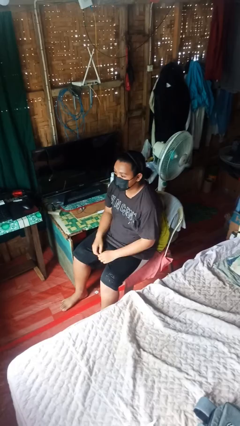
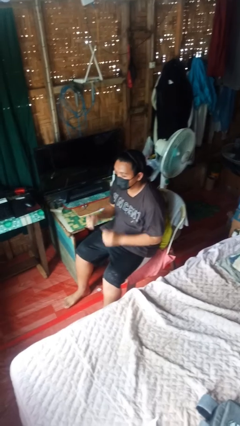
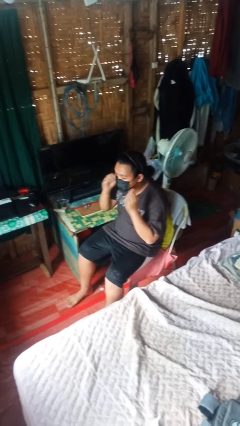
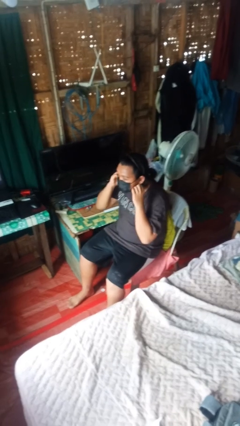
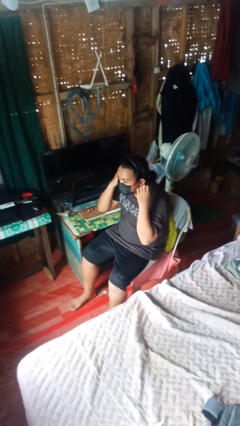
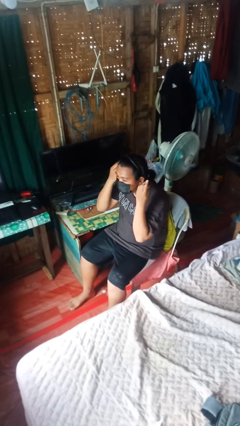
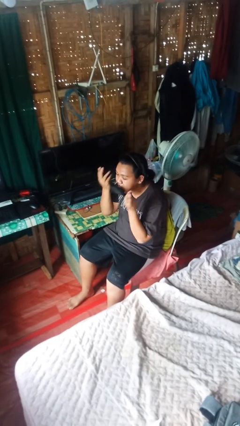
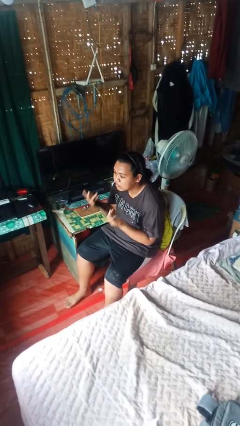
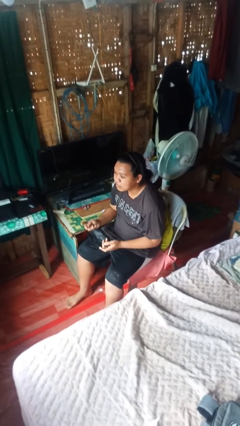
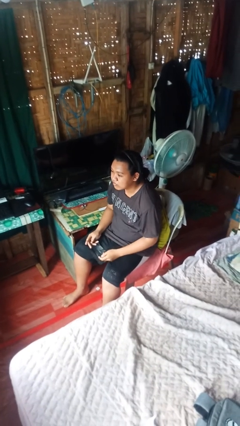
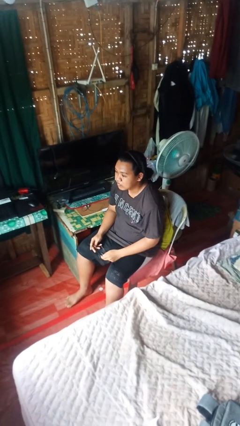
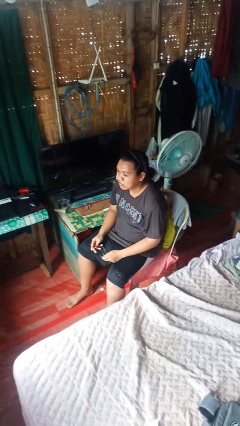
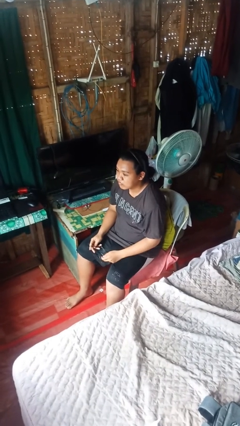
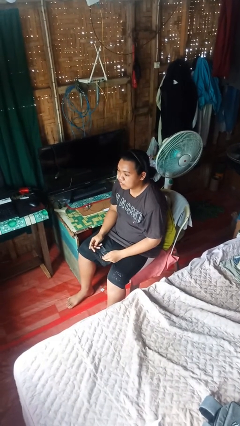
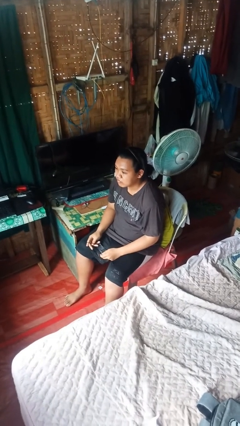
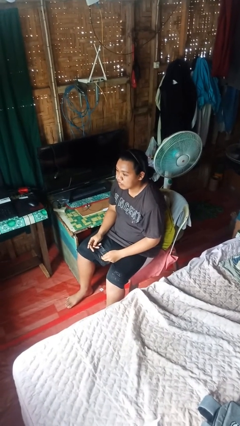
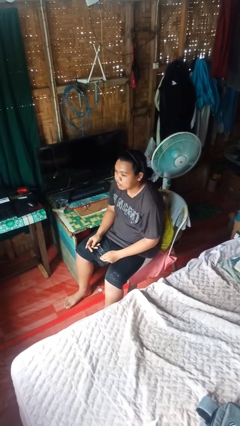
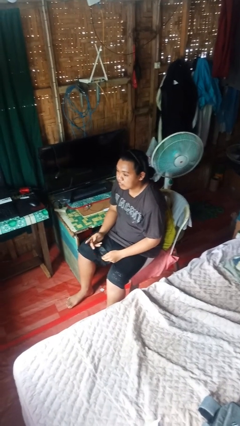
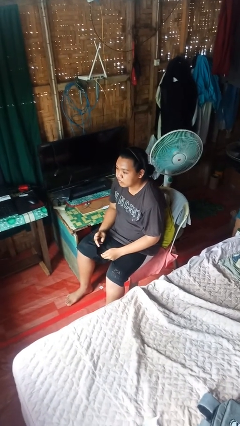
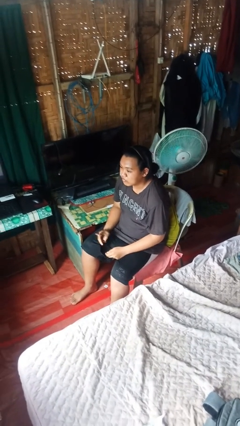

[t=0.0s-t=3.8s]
person takes off facemask

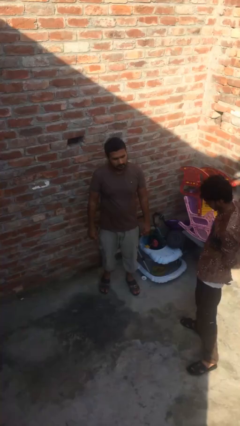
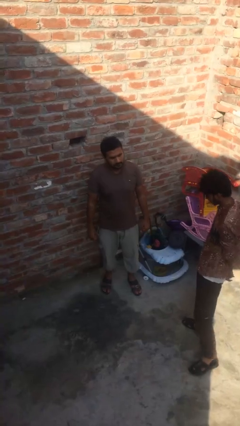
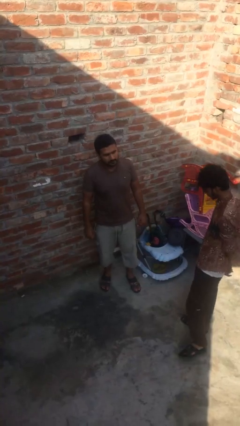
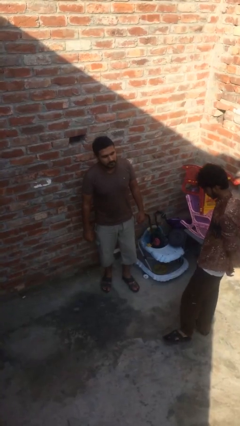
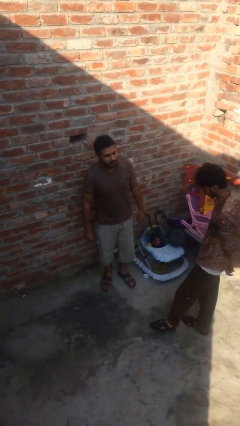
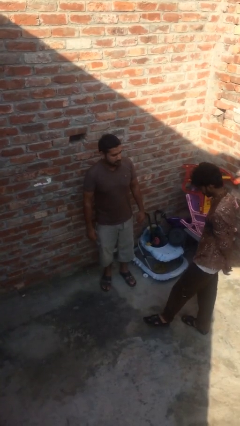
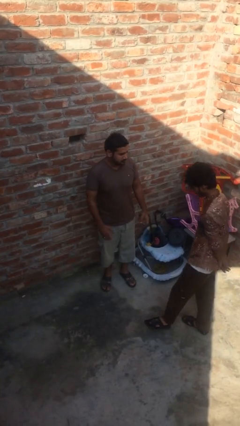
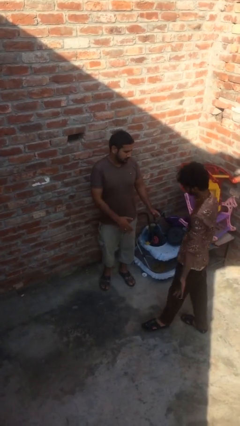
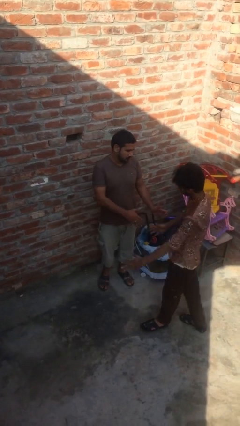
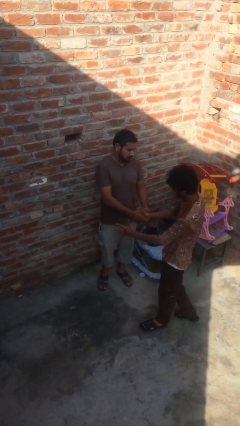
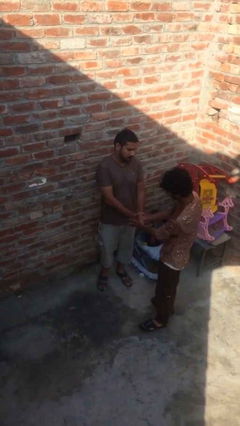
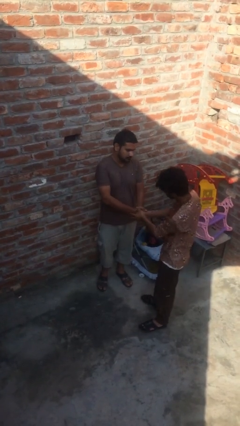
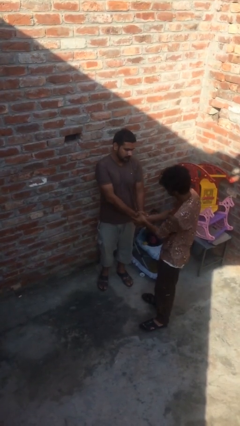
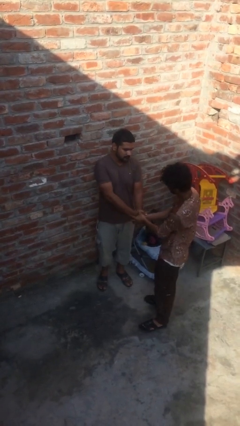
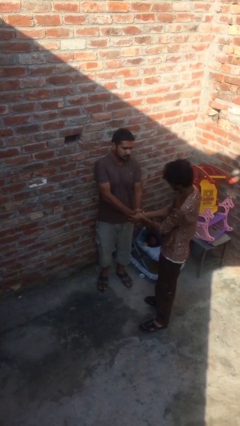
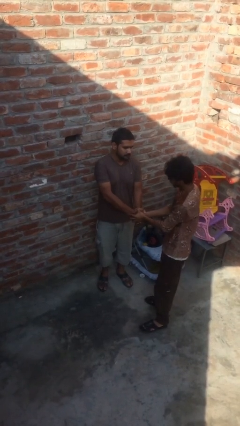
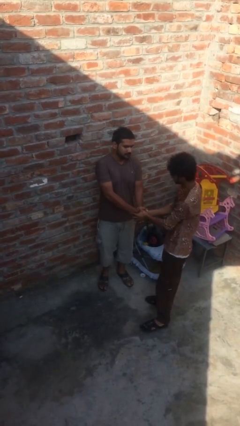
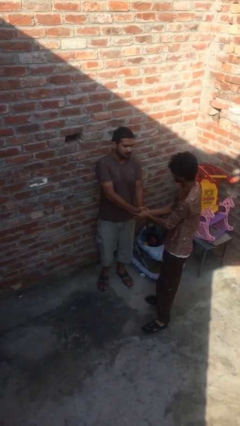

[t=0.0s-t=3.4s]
person shakes hand

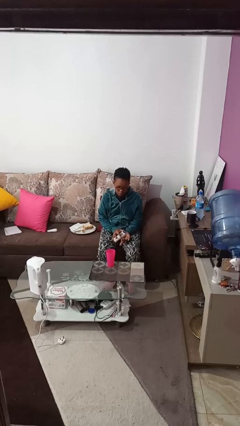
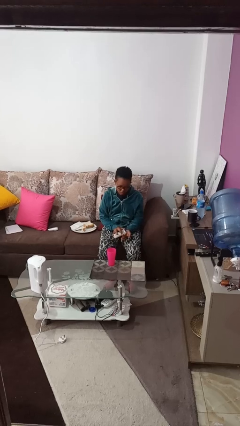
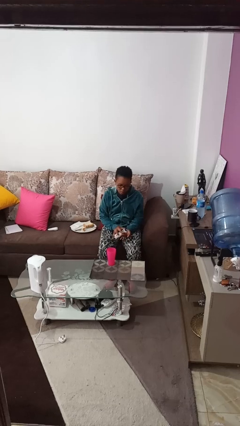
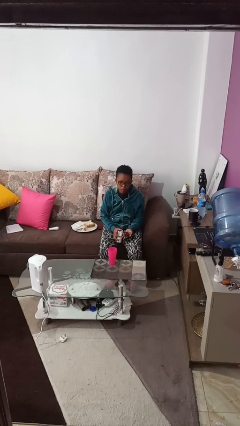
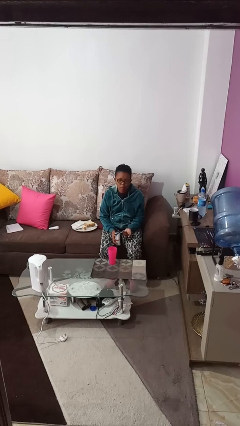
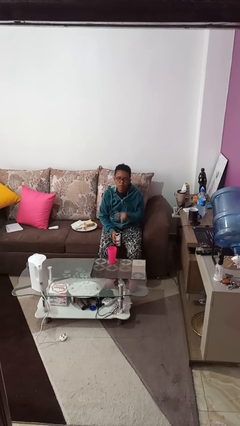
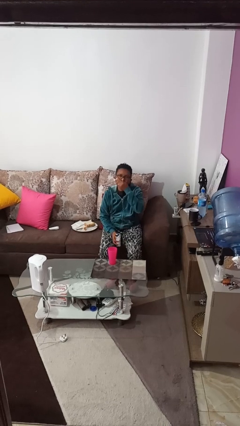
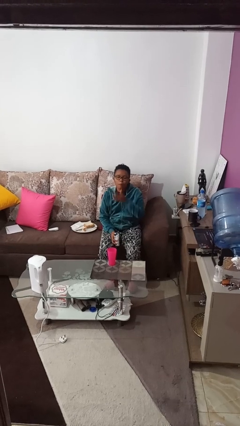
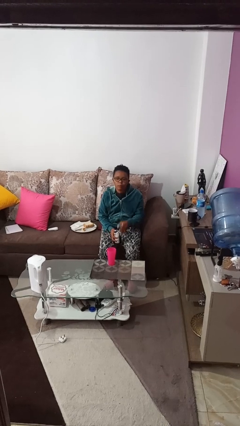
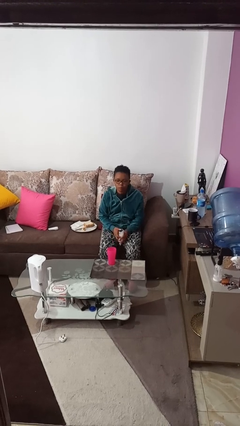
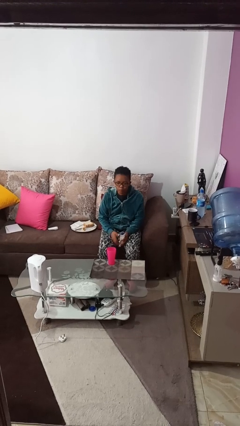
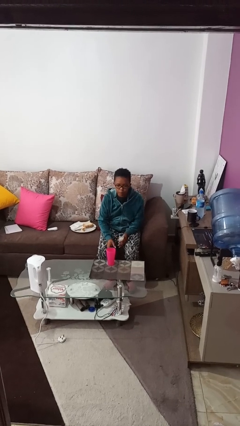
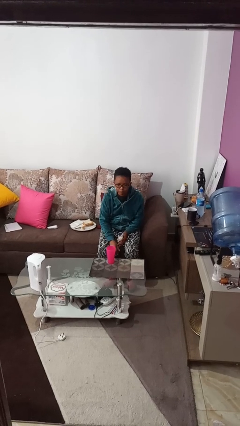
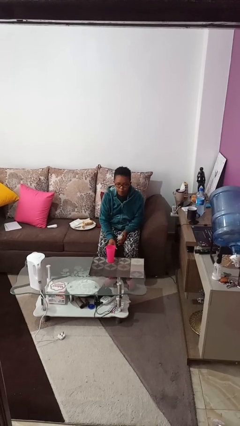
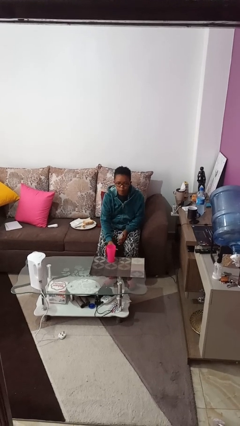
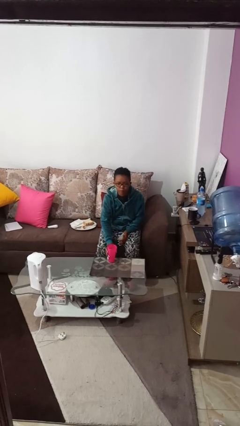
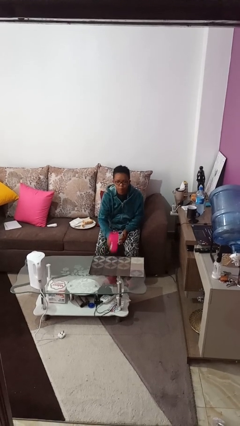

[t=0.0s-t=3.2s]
person takes medicine pills

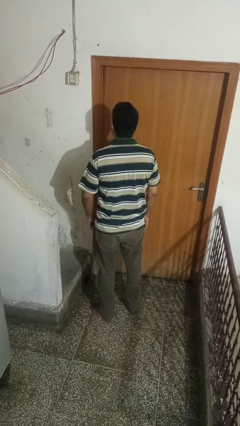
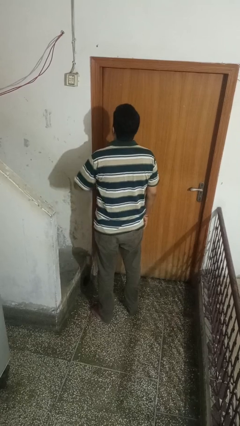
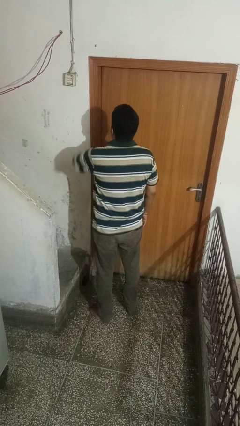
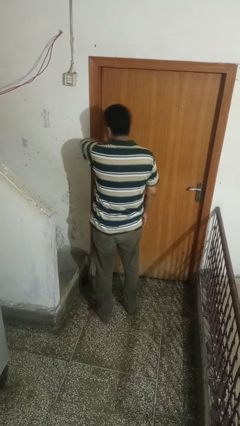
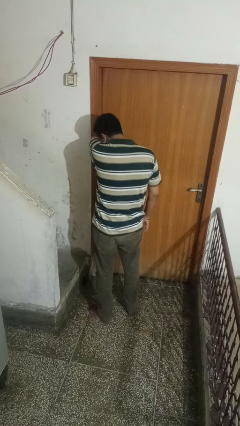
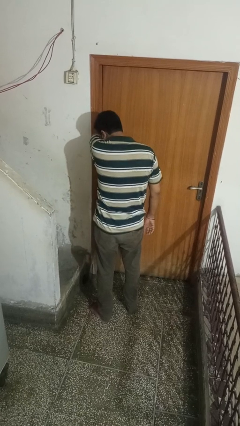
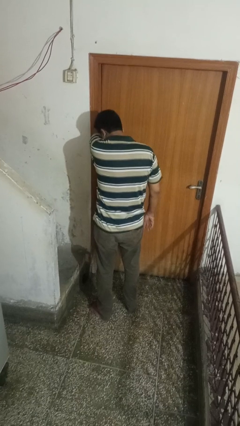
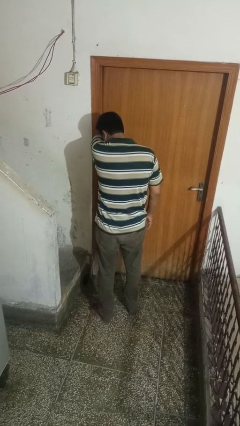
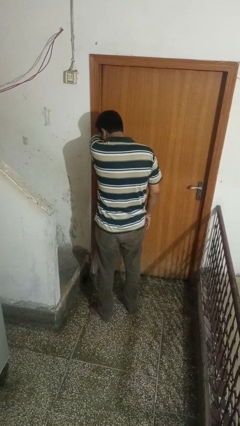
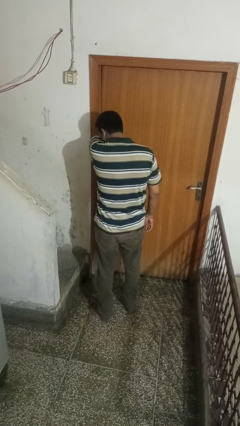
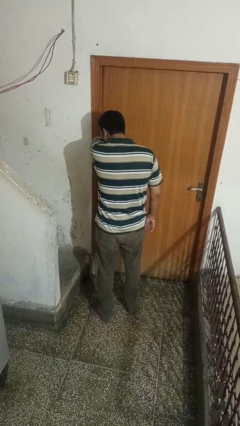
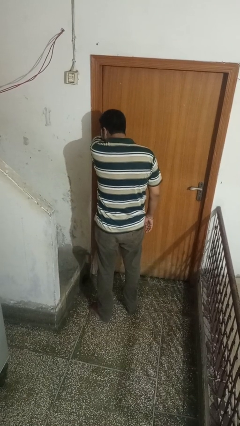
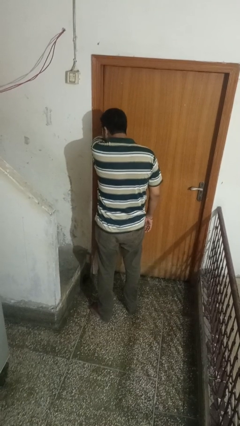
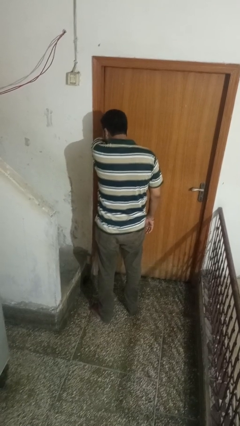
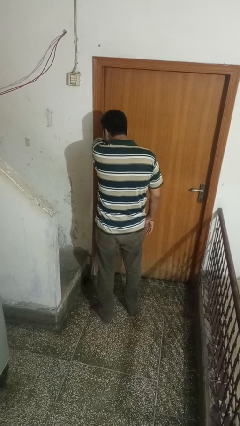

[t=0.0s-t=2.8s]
person sneezes into arm

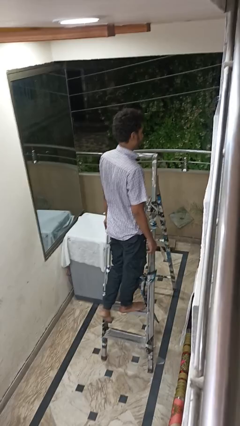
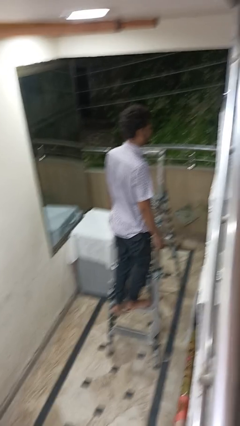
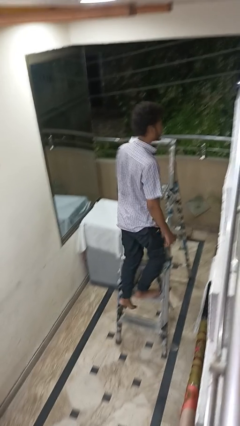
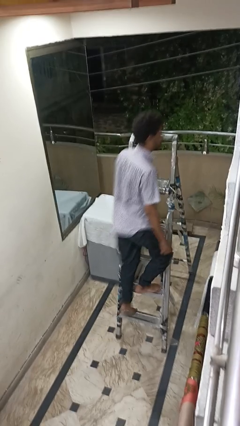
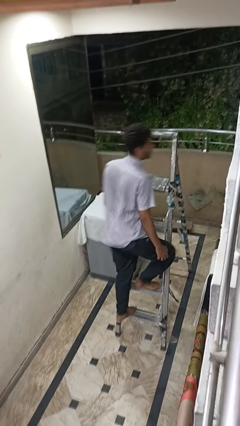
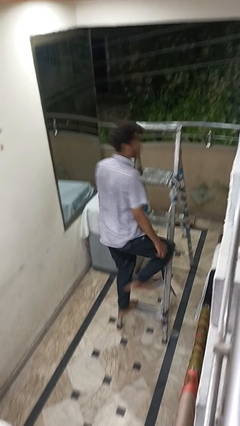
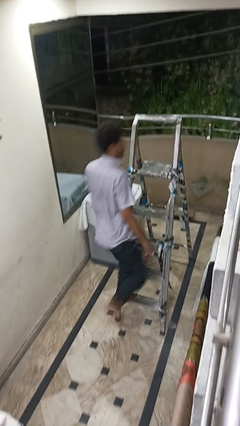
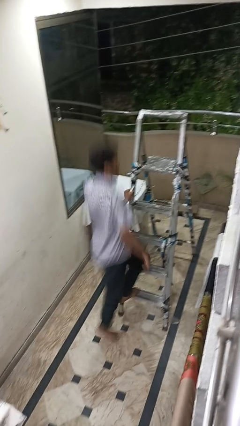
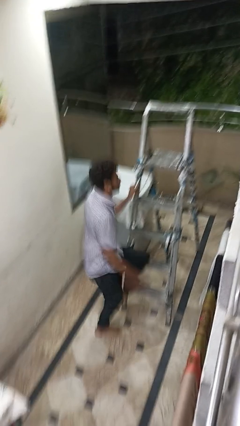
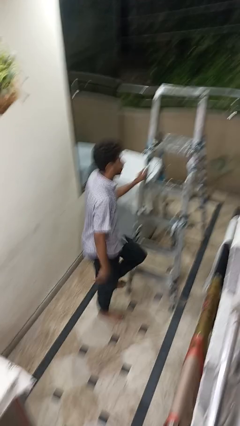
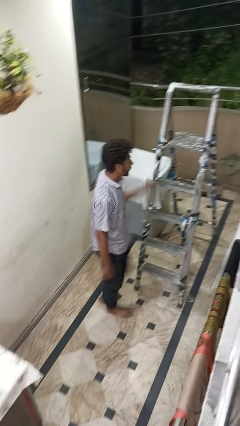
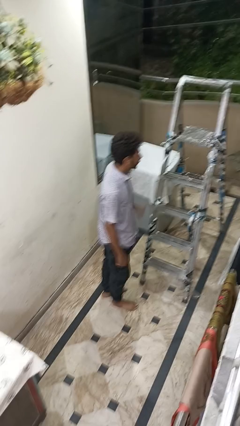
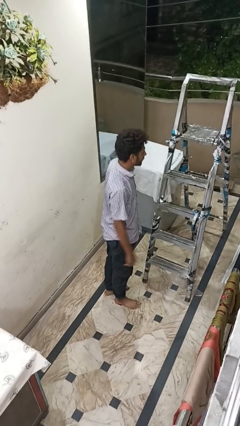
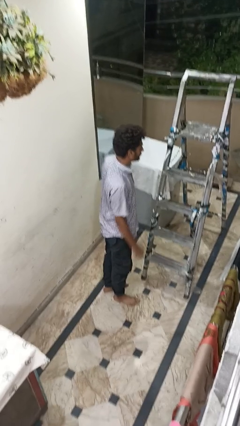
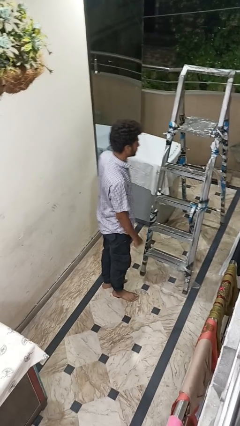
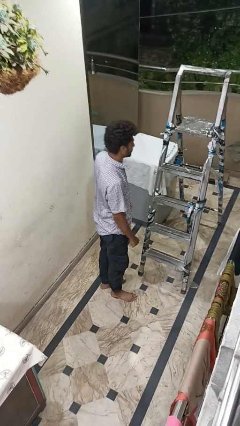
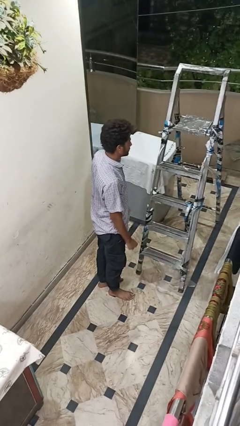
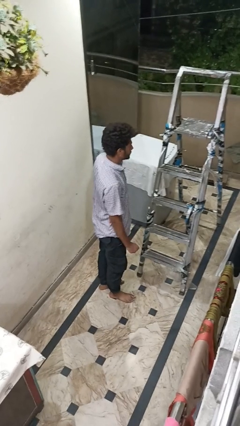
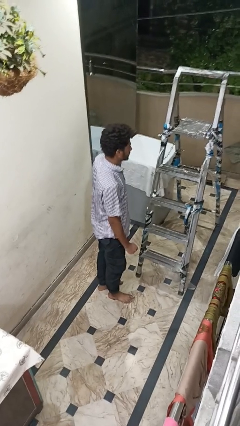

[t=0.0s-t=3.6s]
person climbs down ladder

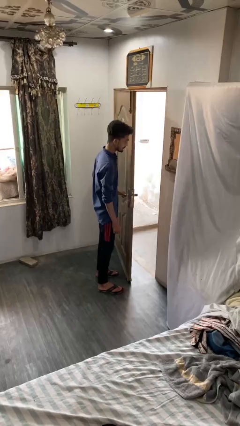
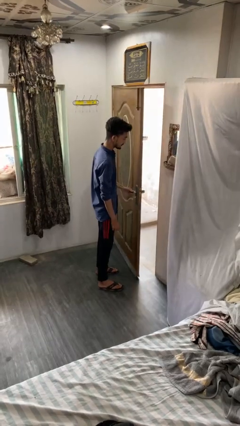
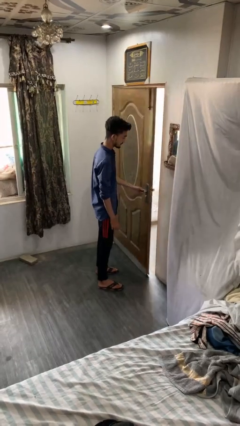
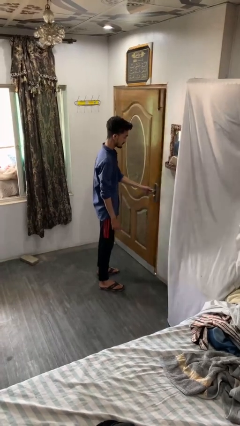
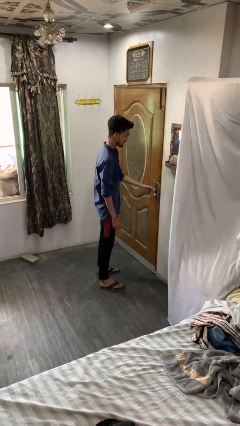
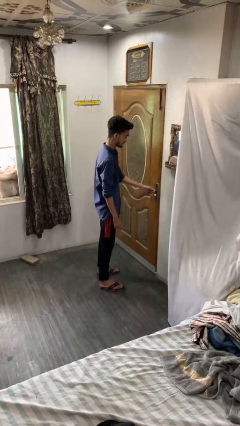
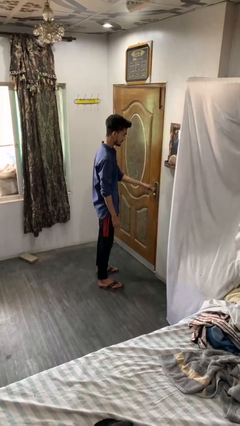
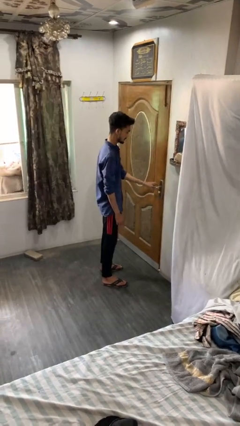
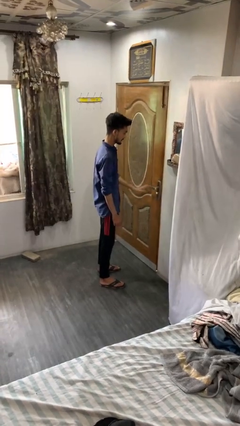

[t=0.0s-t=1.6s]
person closes facility door
